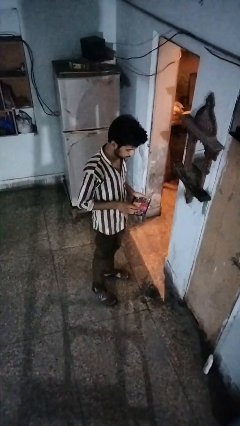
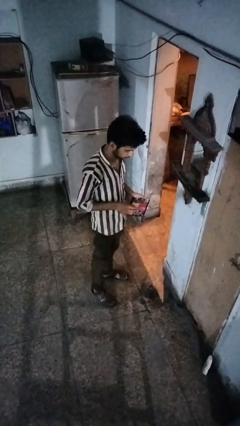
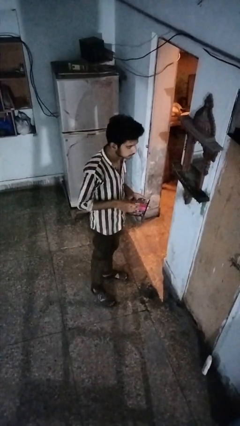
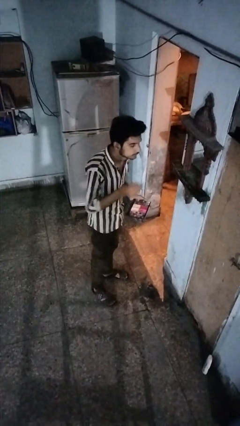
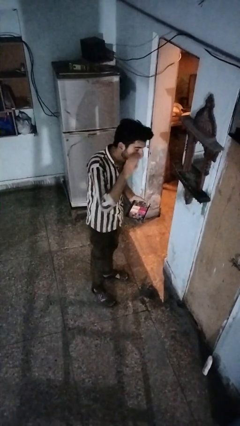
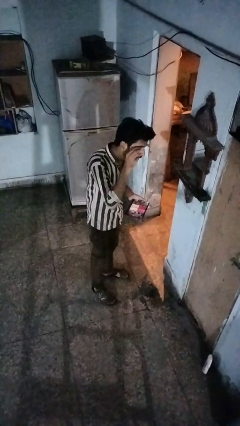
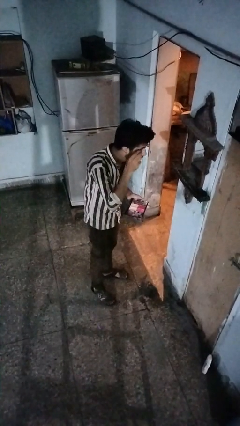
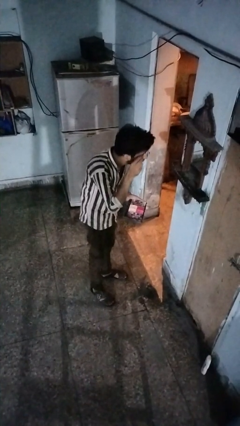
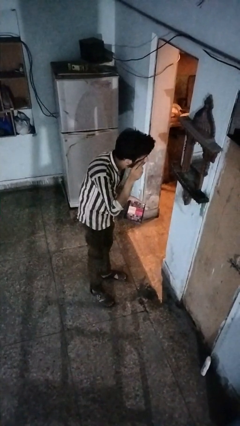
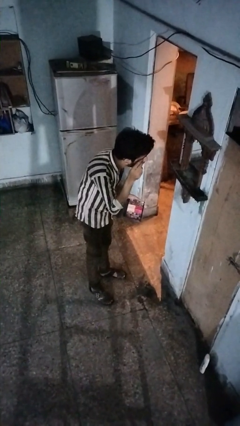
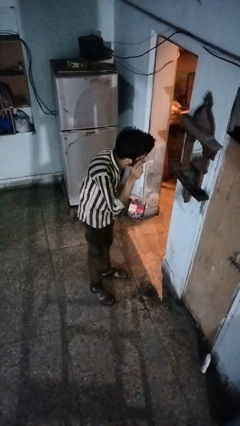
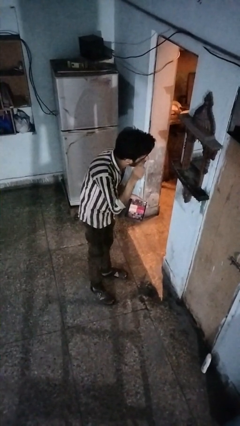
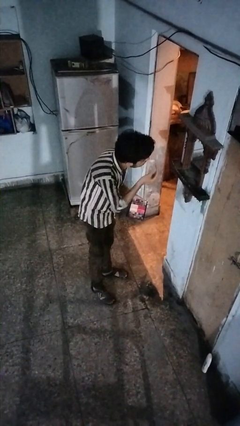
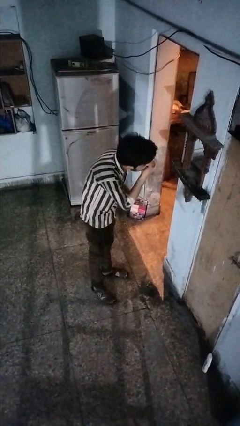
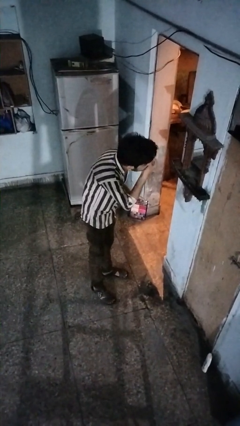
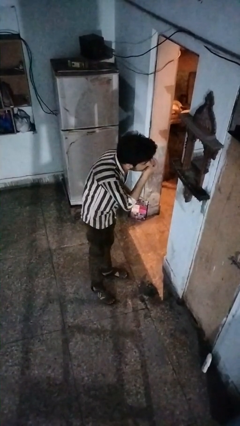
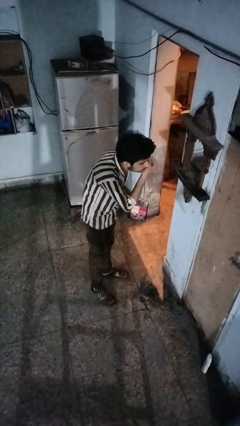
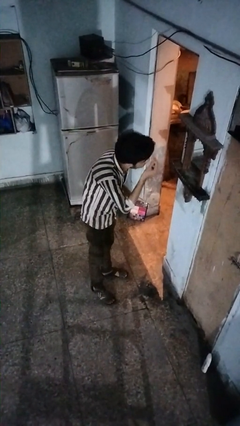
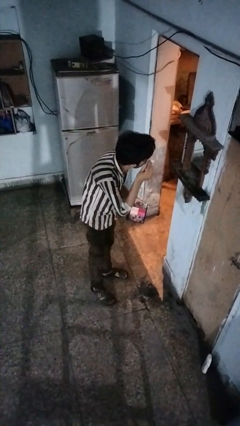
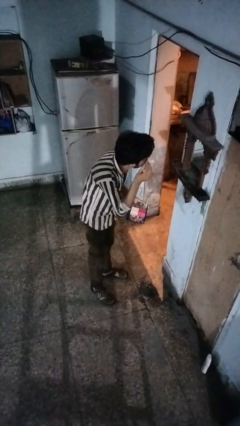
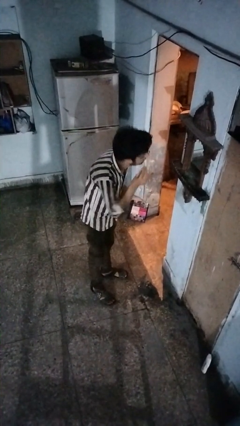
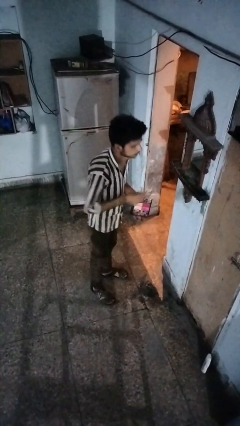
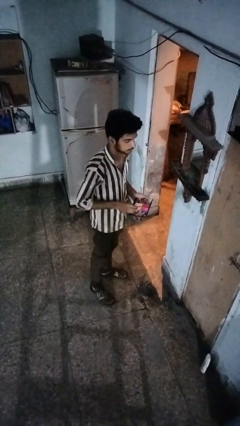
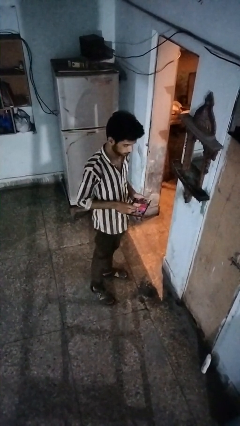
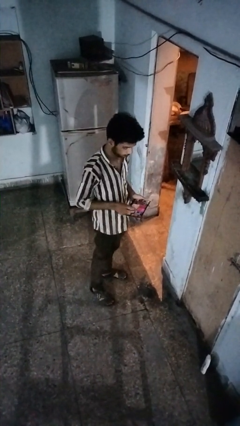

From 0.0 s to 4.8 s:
person applies eye makeup

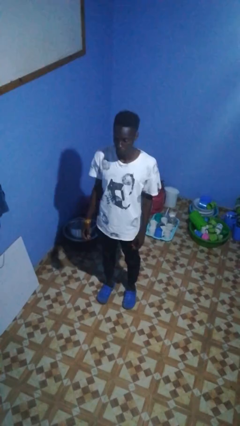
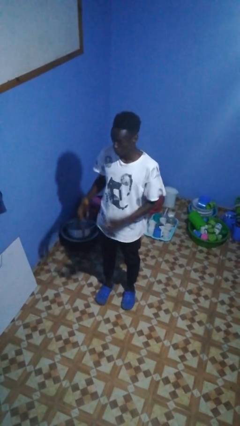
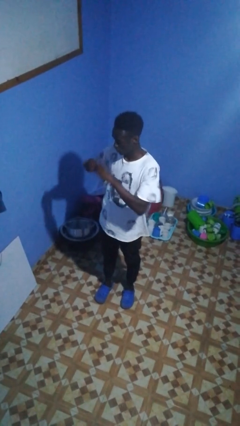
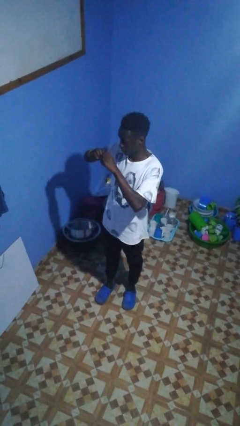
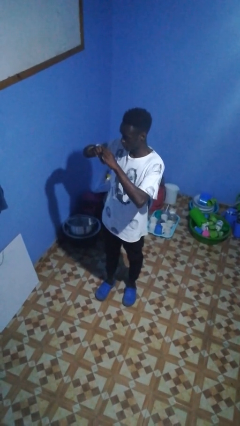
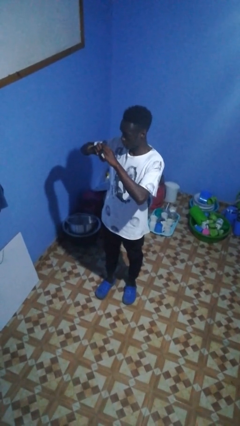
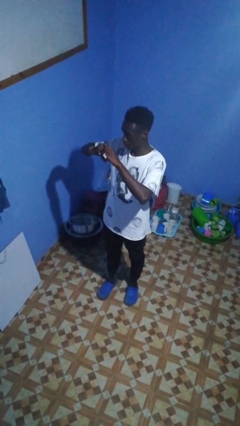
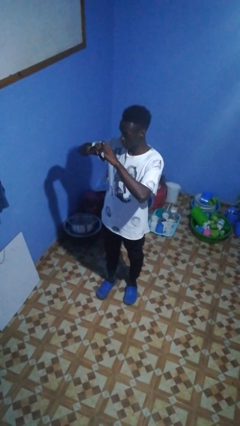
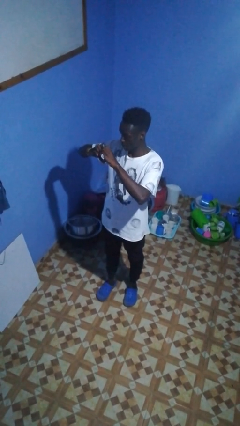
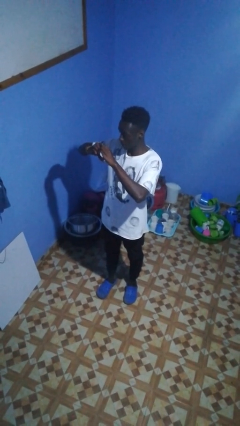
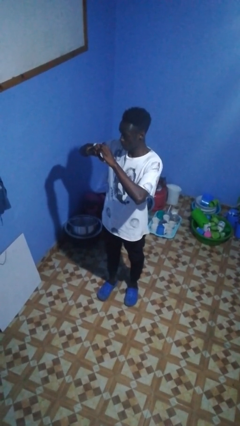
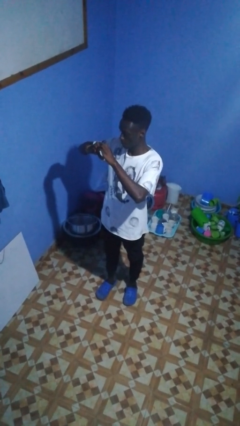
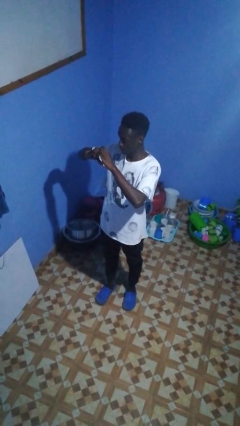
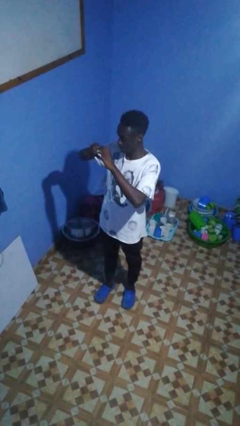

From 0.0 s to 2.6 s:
person gestures heart

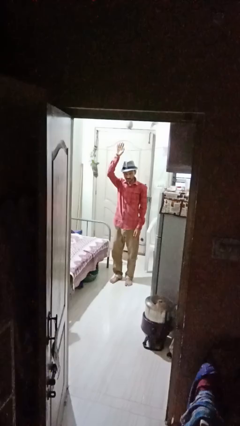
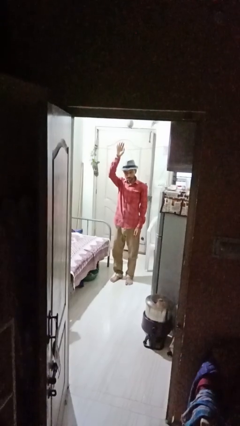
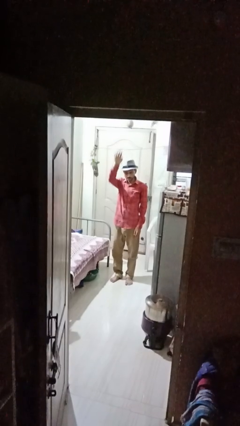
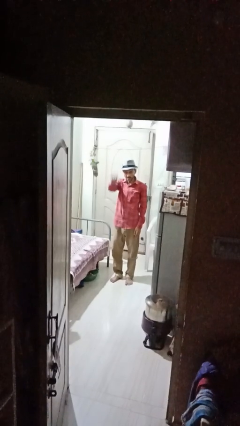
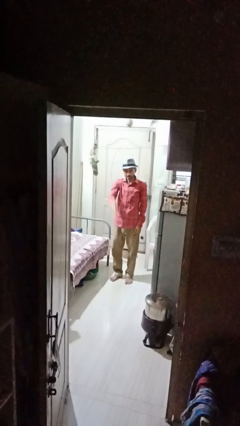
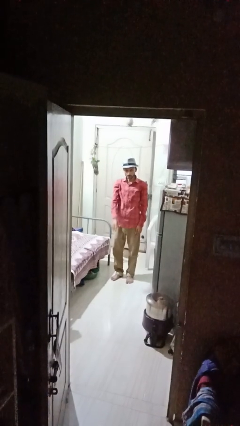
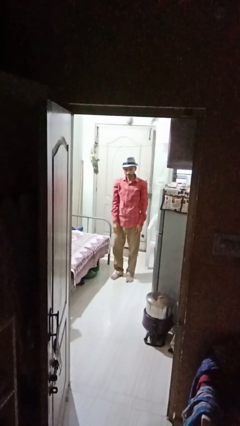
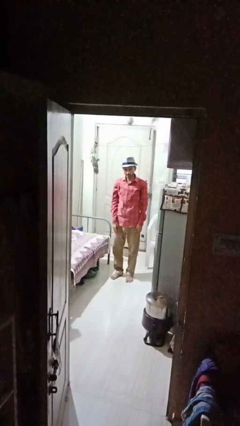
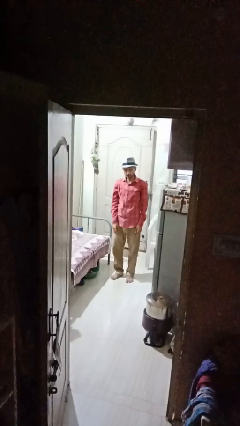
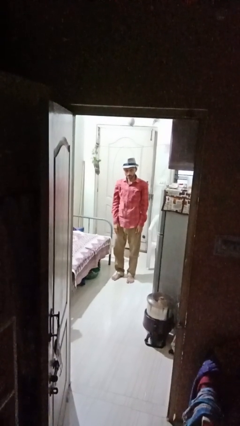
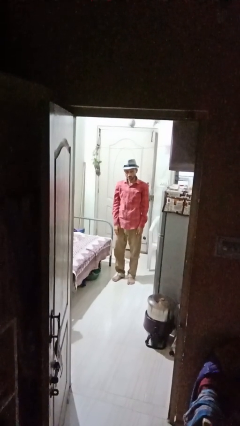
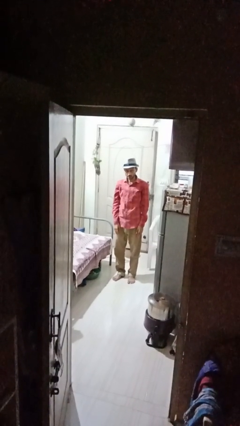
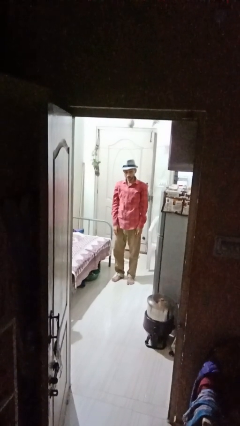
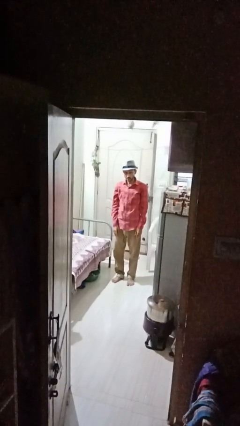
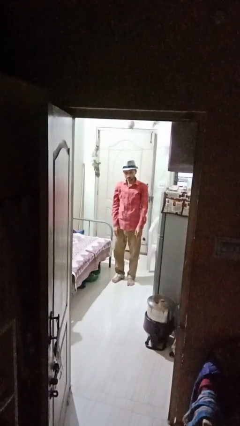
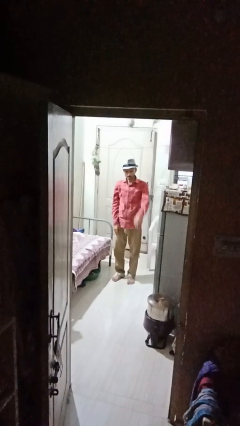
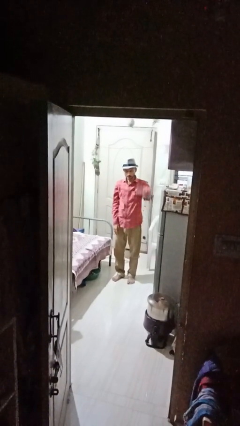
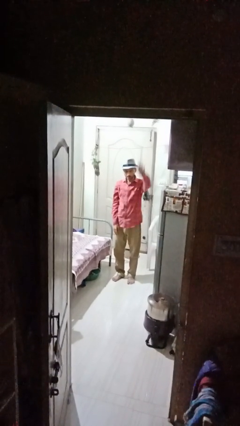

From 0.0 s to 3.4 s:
person gestures lower hand

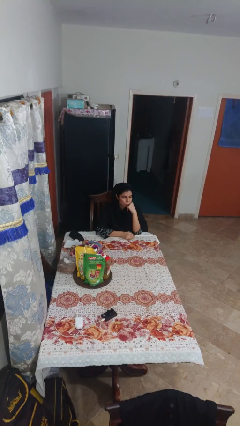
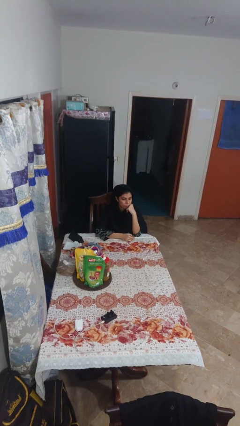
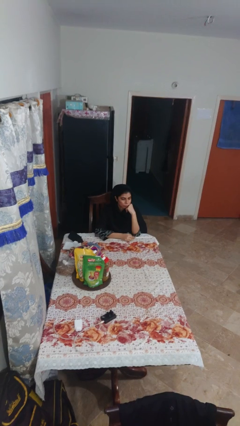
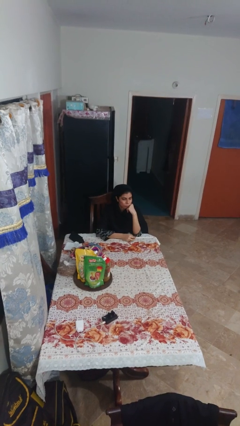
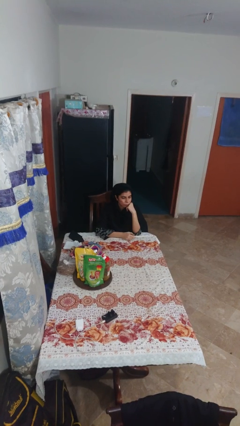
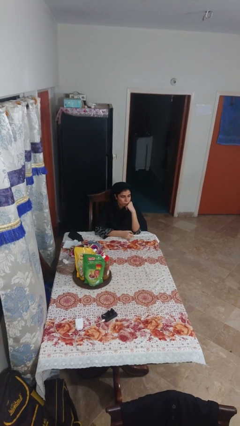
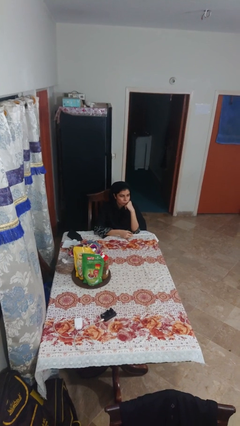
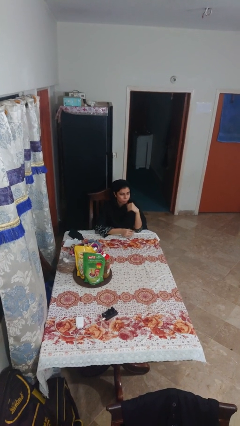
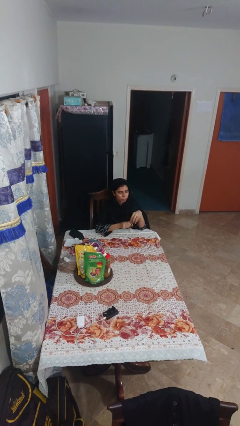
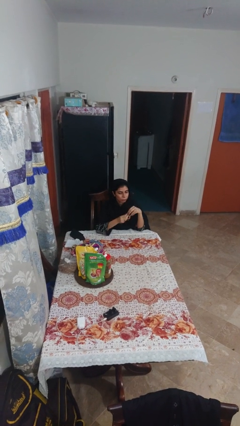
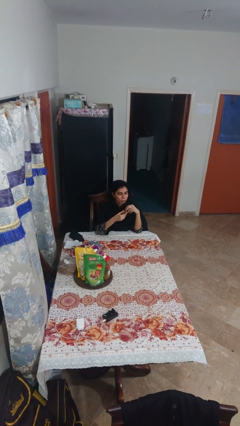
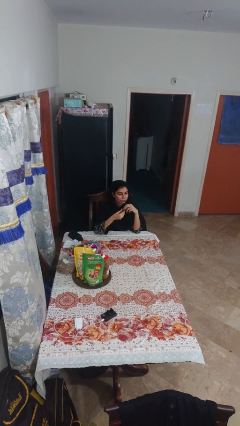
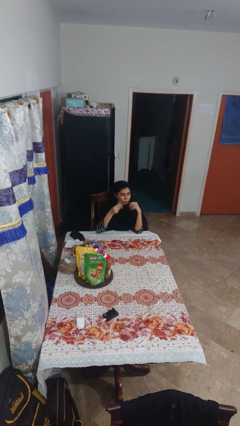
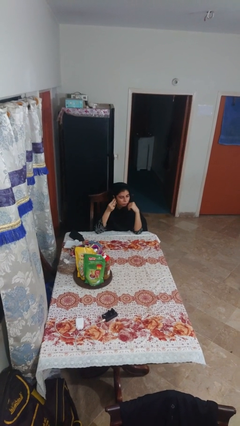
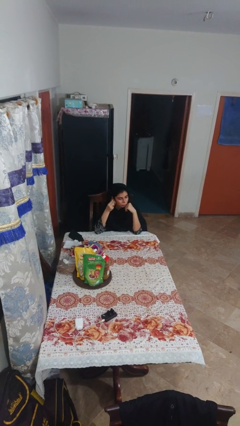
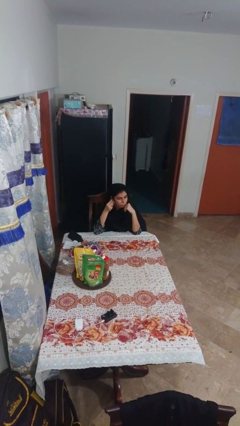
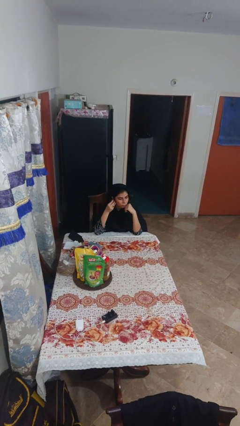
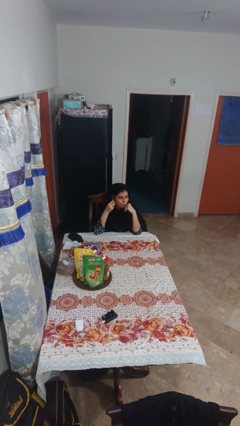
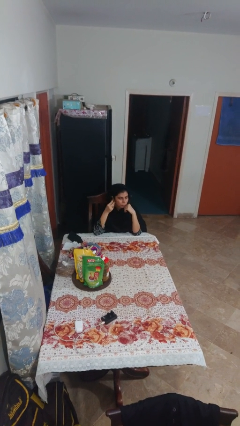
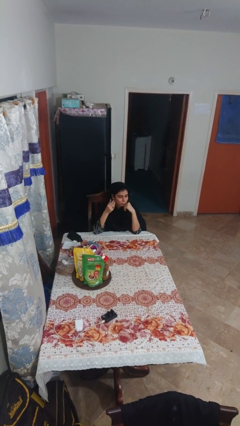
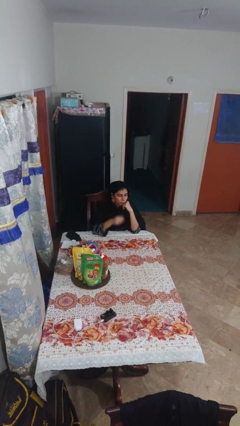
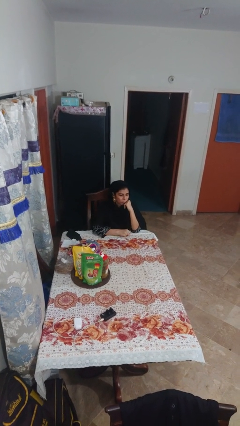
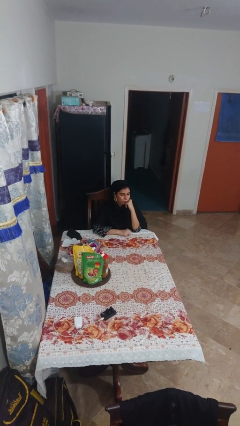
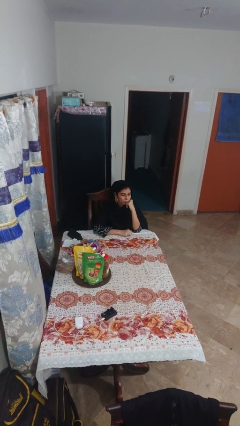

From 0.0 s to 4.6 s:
person puts on earrings

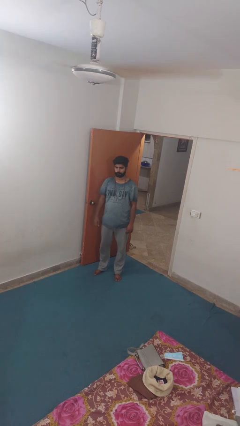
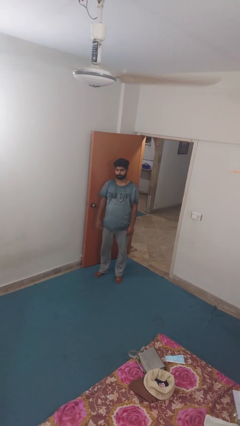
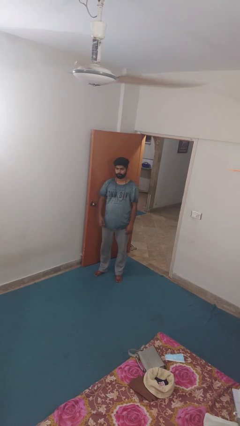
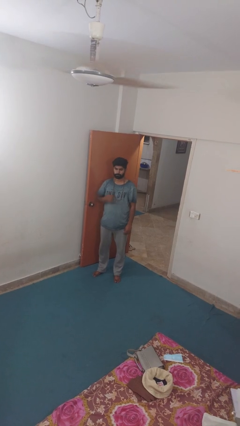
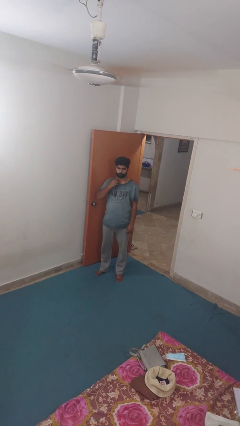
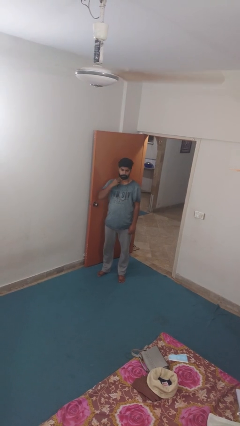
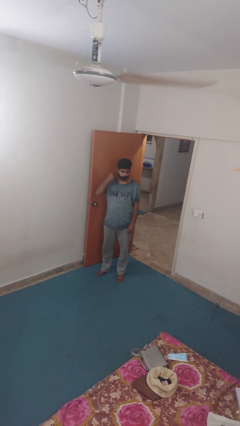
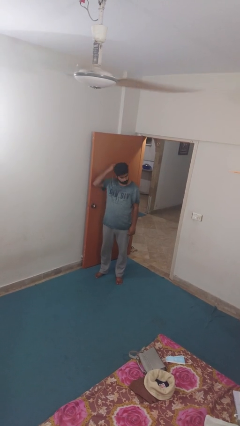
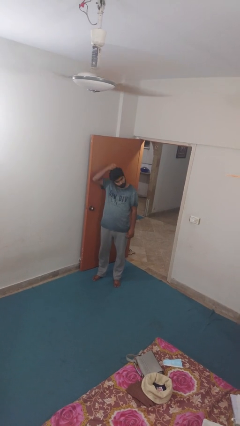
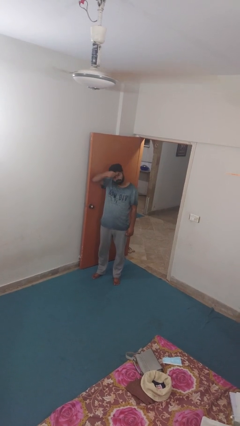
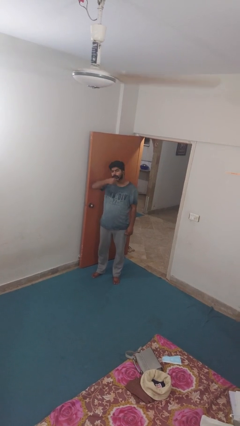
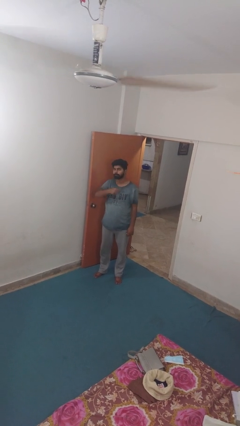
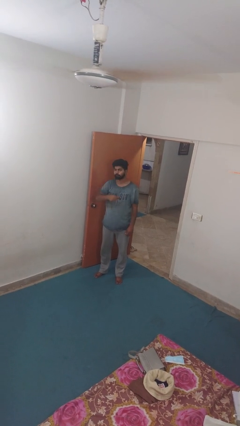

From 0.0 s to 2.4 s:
person takes off necklace
